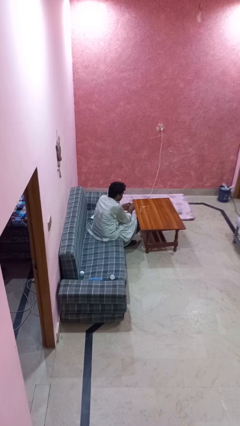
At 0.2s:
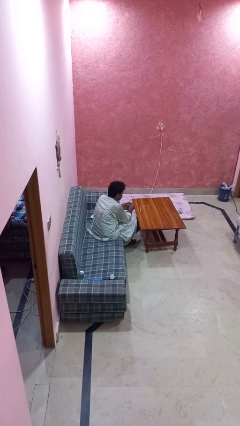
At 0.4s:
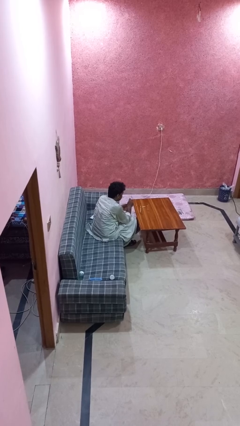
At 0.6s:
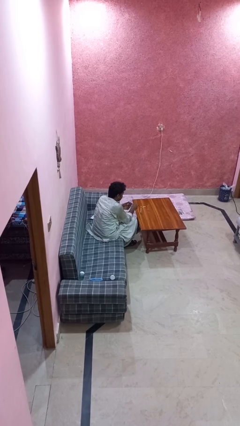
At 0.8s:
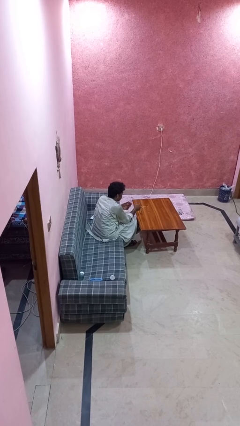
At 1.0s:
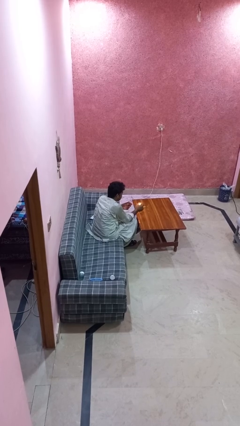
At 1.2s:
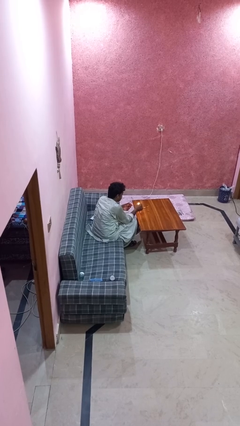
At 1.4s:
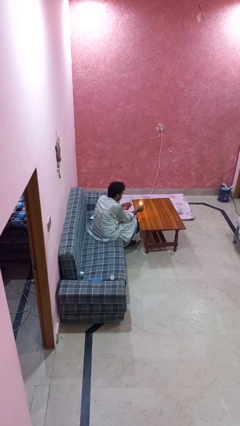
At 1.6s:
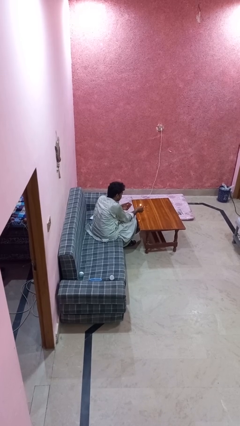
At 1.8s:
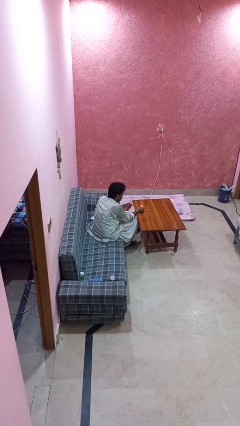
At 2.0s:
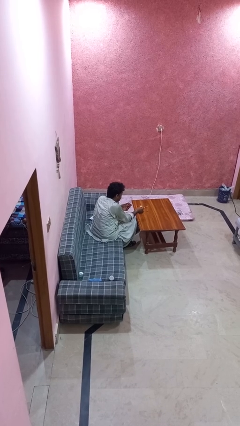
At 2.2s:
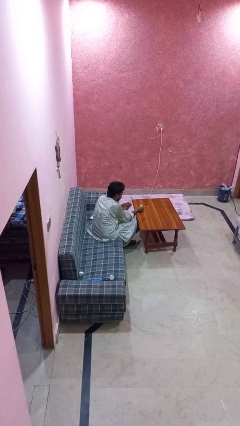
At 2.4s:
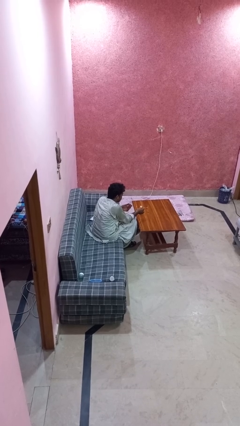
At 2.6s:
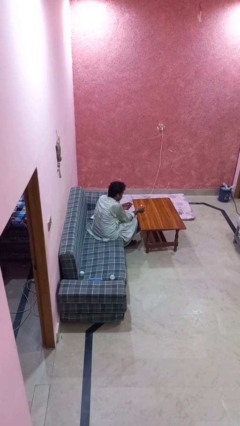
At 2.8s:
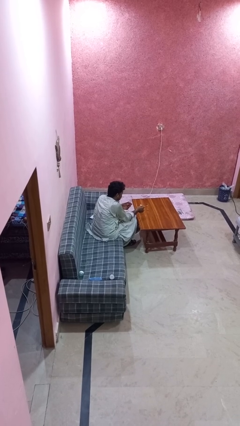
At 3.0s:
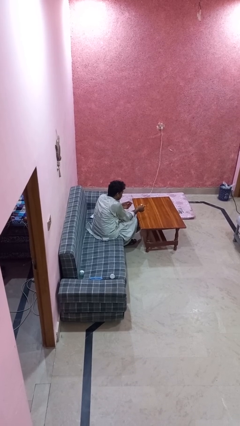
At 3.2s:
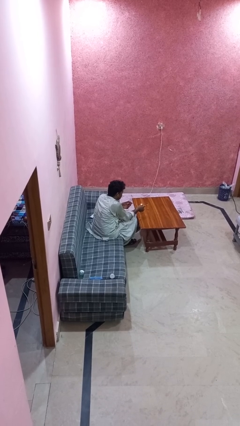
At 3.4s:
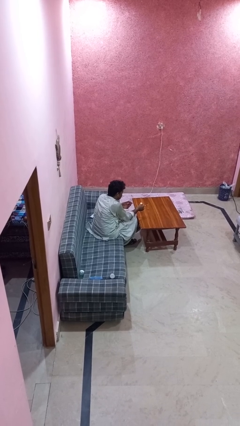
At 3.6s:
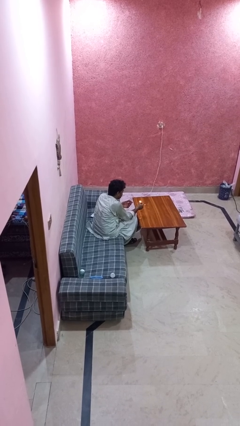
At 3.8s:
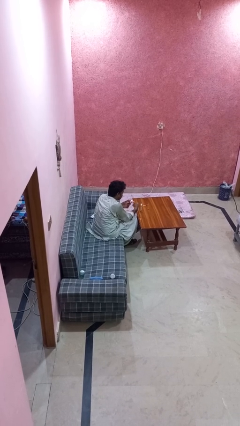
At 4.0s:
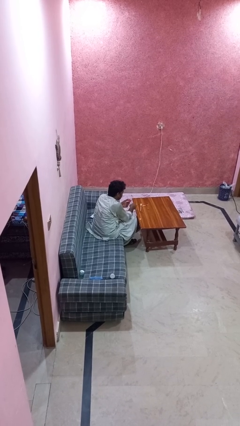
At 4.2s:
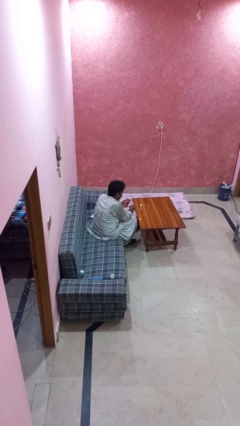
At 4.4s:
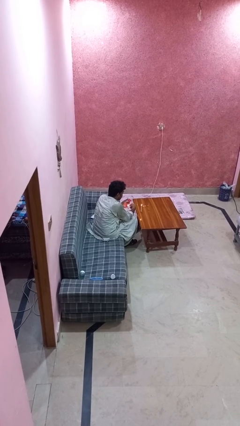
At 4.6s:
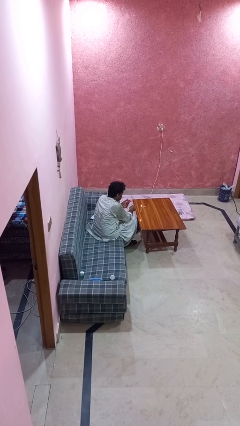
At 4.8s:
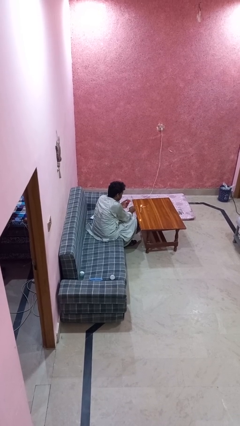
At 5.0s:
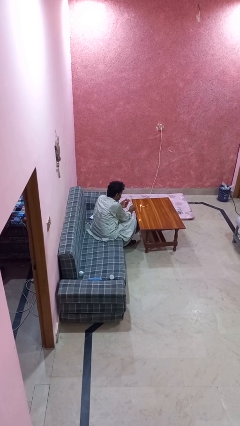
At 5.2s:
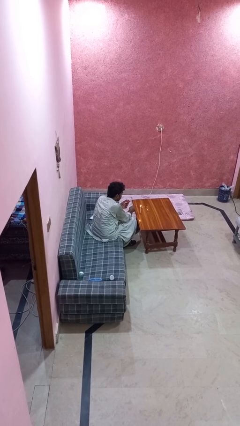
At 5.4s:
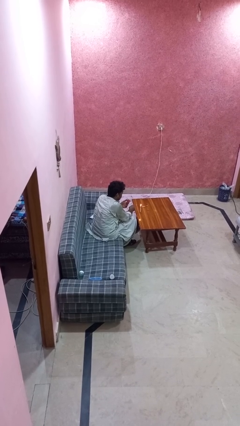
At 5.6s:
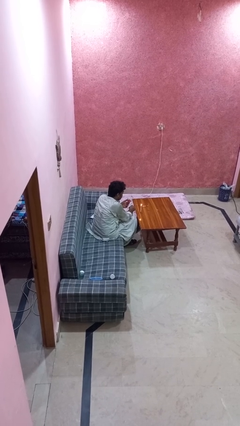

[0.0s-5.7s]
person lights candle

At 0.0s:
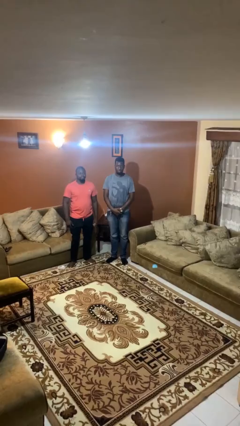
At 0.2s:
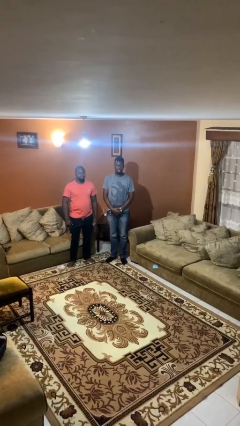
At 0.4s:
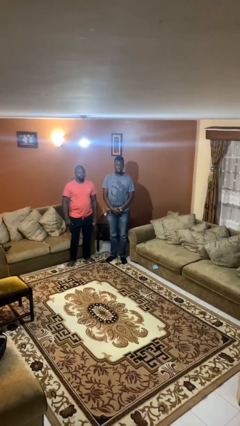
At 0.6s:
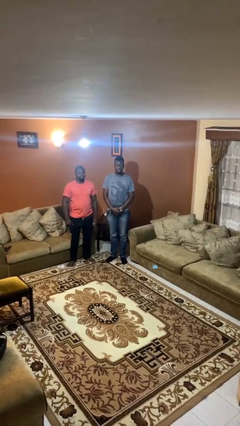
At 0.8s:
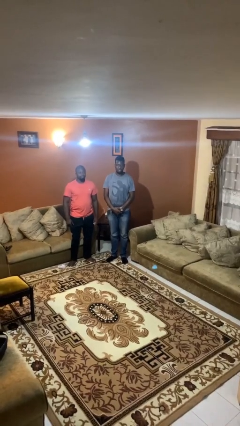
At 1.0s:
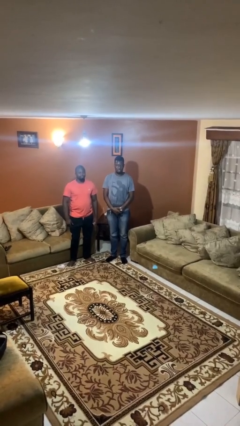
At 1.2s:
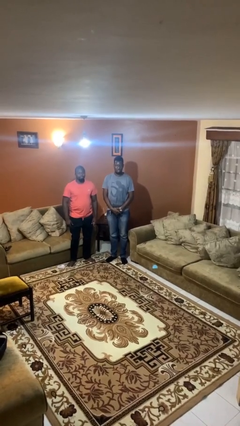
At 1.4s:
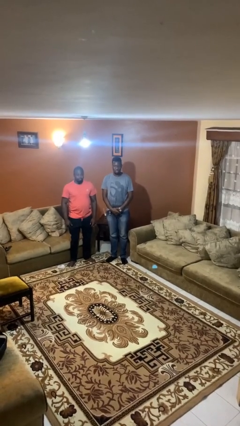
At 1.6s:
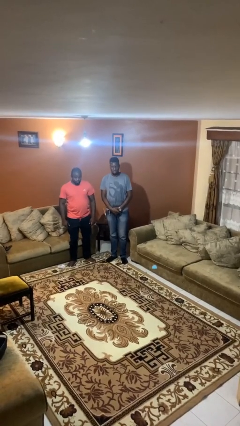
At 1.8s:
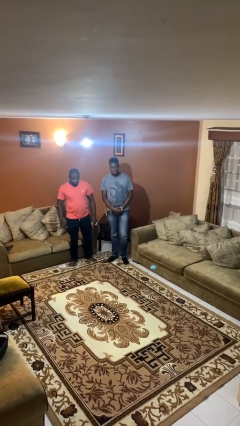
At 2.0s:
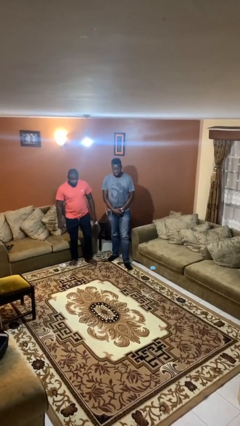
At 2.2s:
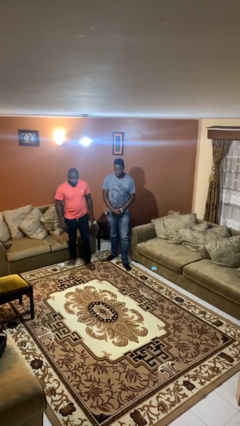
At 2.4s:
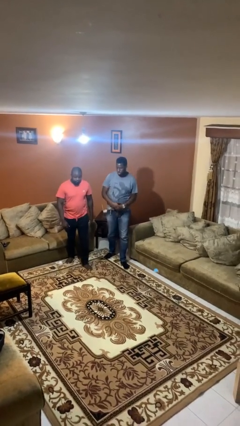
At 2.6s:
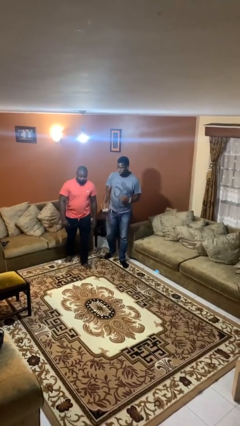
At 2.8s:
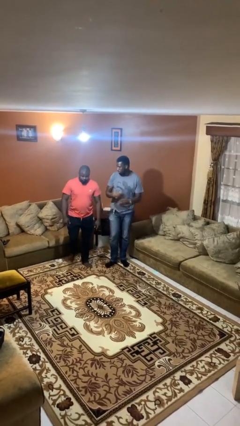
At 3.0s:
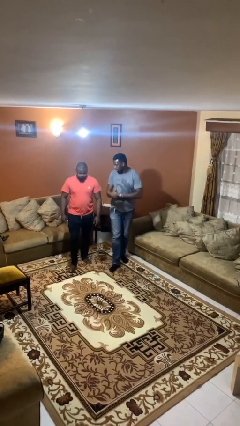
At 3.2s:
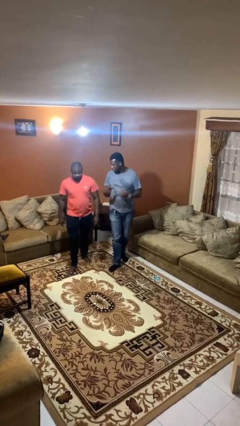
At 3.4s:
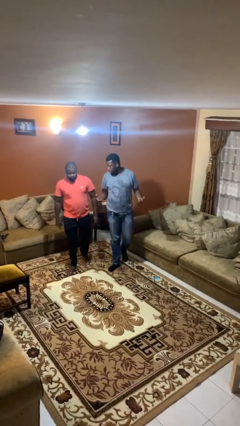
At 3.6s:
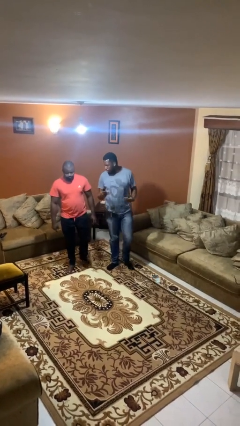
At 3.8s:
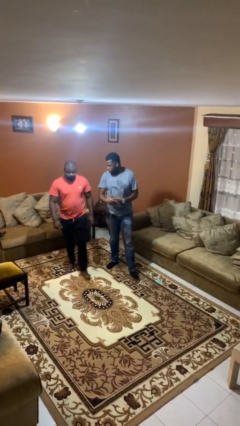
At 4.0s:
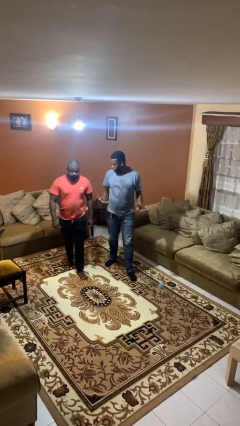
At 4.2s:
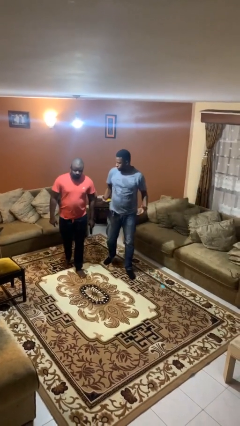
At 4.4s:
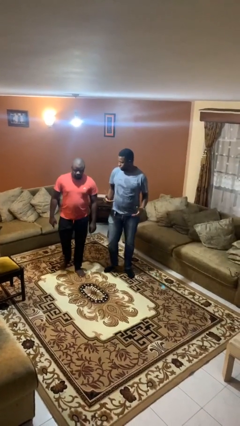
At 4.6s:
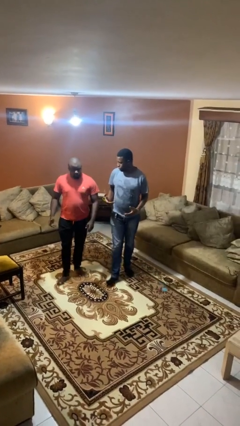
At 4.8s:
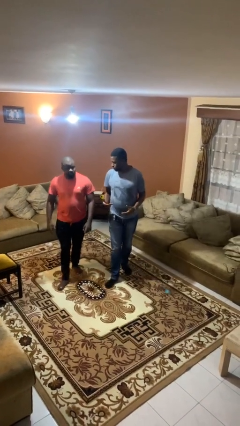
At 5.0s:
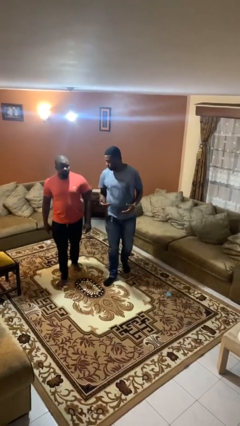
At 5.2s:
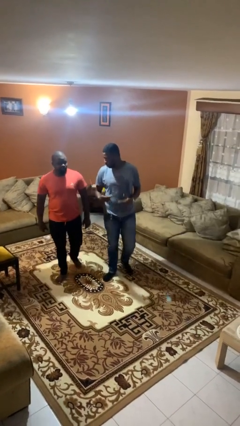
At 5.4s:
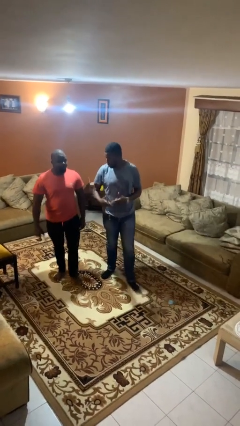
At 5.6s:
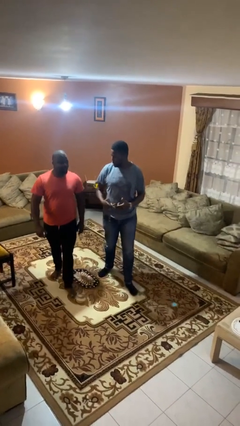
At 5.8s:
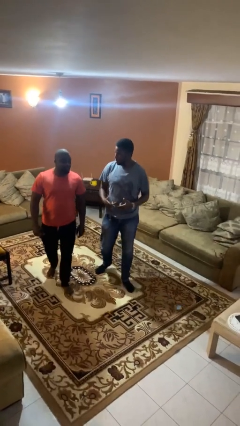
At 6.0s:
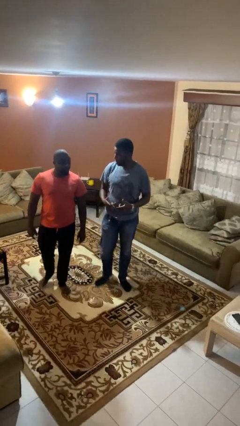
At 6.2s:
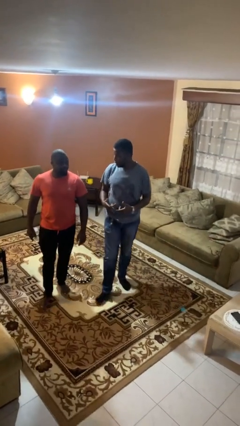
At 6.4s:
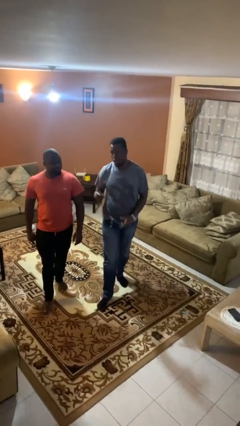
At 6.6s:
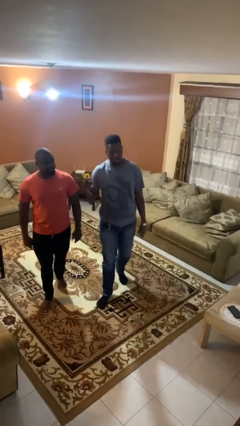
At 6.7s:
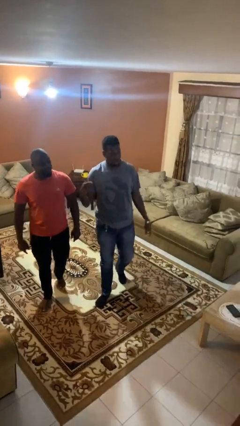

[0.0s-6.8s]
person talks to person

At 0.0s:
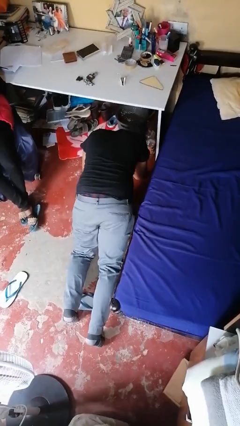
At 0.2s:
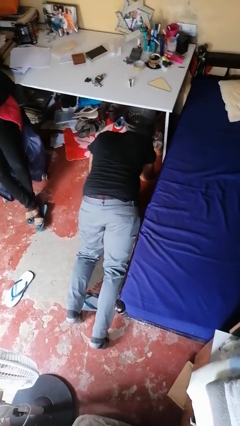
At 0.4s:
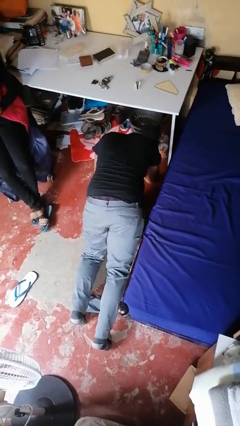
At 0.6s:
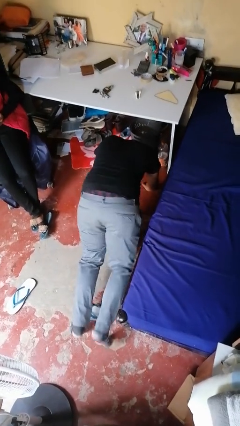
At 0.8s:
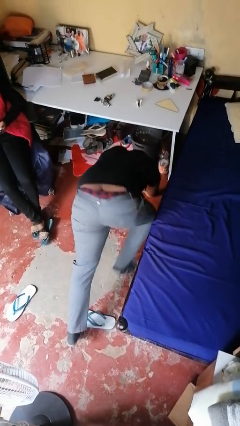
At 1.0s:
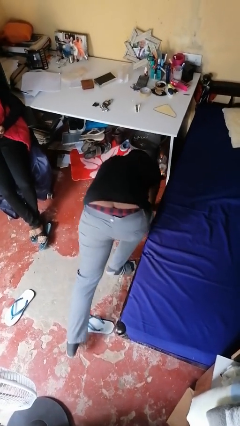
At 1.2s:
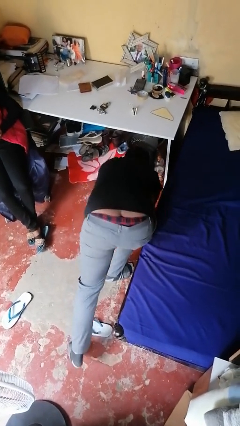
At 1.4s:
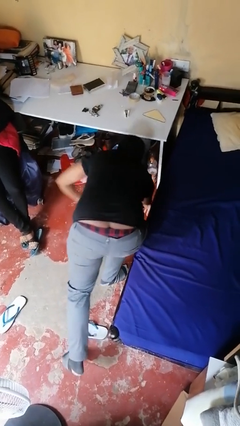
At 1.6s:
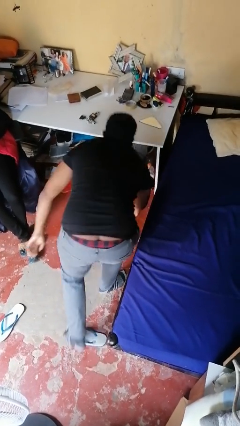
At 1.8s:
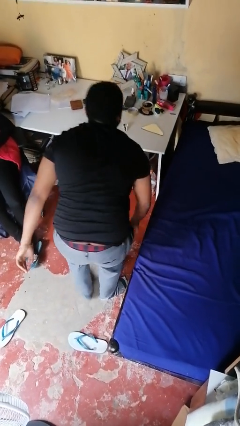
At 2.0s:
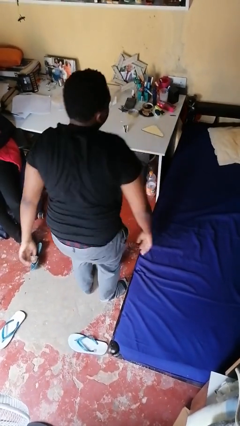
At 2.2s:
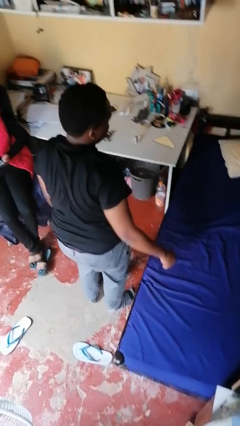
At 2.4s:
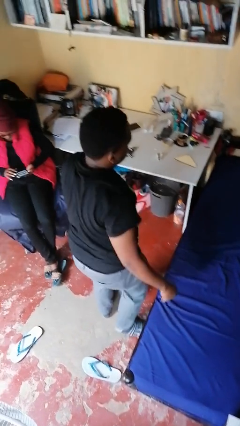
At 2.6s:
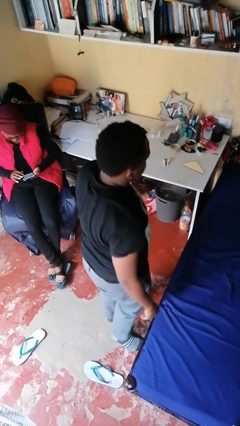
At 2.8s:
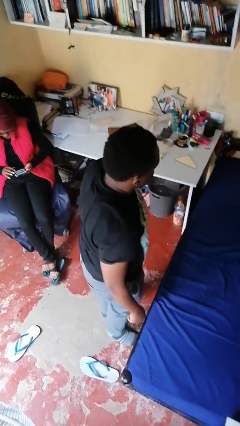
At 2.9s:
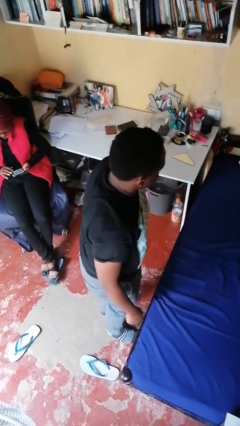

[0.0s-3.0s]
person stands up from floor

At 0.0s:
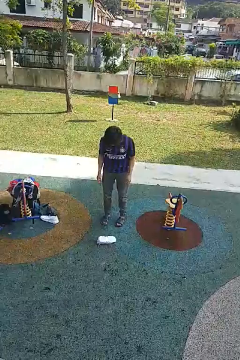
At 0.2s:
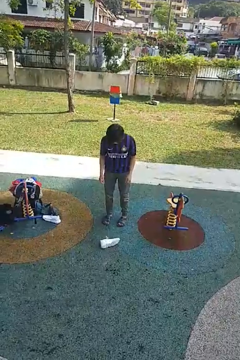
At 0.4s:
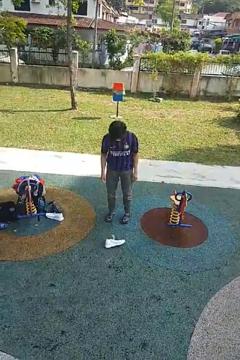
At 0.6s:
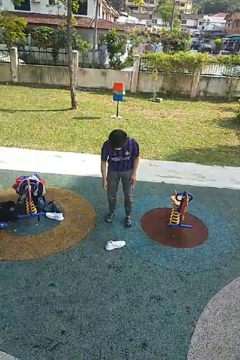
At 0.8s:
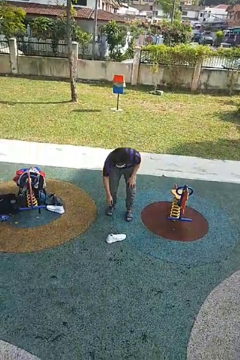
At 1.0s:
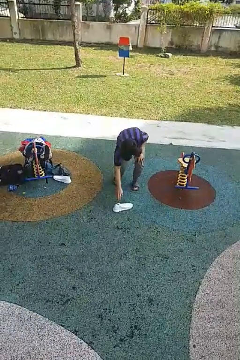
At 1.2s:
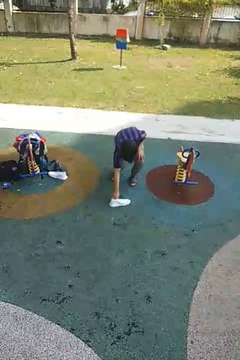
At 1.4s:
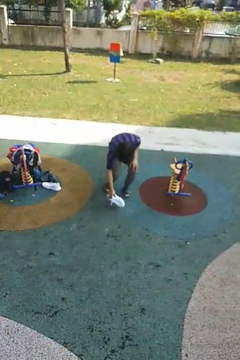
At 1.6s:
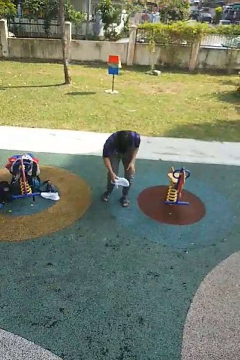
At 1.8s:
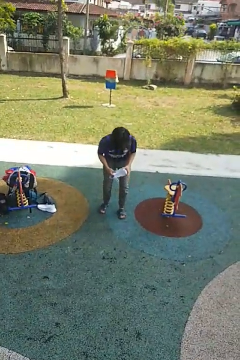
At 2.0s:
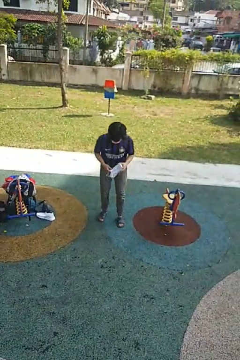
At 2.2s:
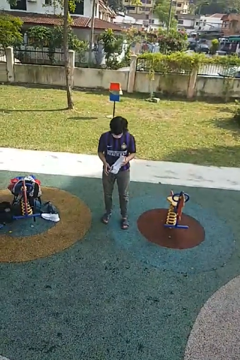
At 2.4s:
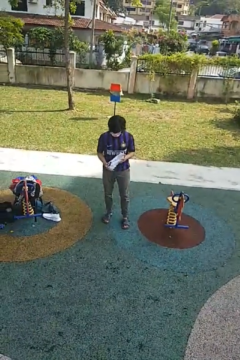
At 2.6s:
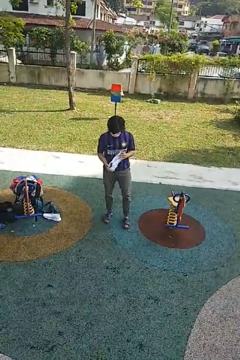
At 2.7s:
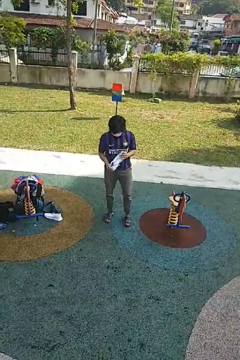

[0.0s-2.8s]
person picks up object from floor

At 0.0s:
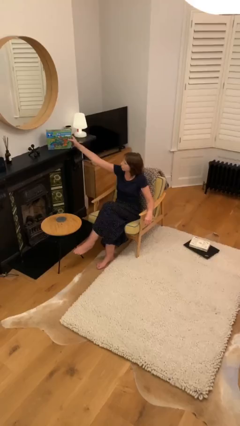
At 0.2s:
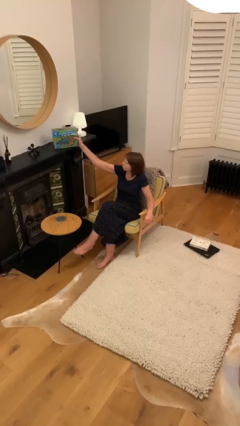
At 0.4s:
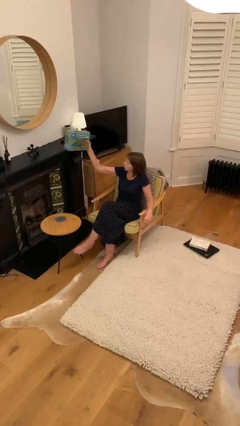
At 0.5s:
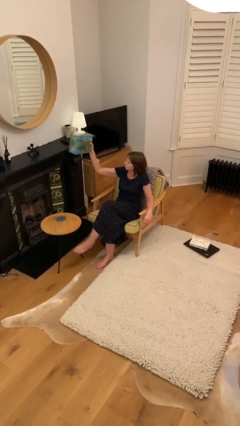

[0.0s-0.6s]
person picks up object from shelf
